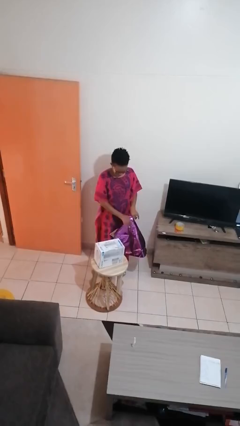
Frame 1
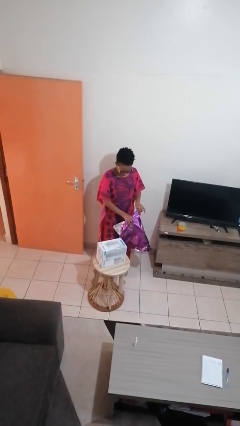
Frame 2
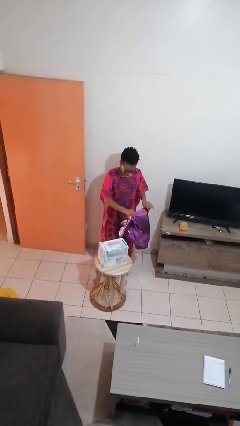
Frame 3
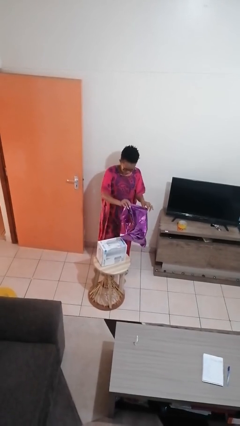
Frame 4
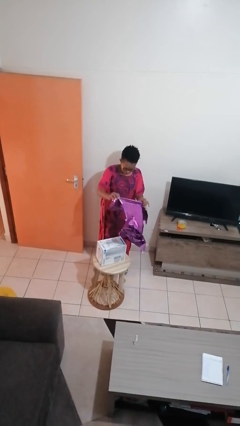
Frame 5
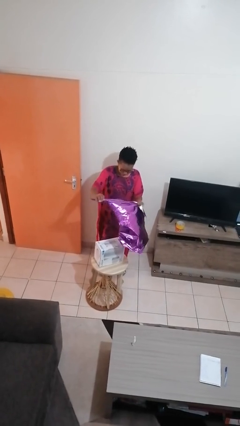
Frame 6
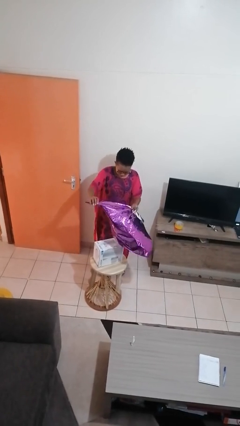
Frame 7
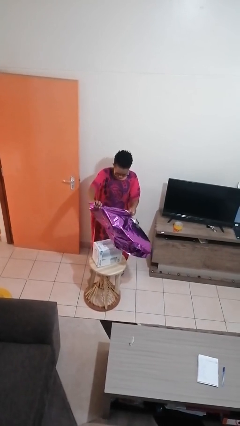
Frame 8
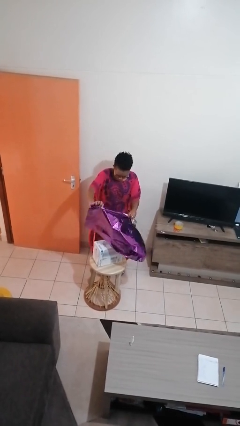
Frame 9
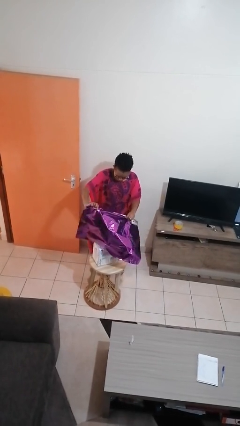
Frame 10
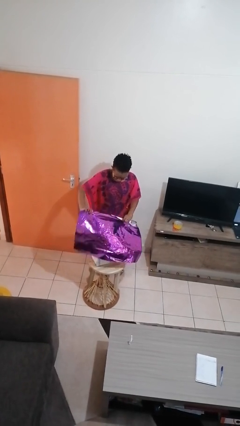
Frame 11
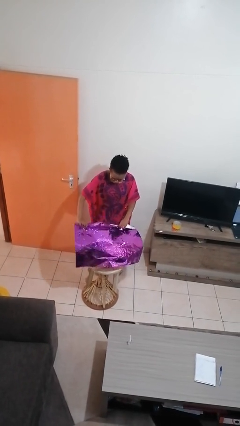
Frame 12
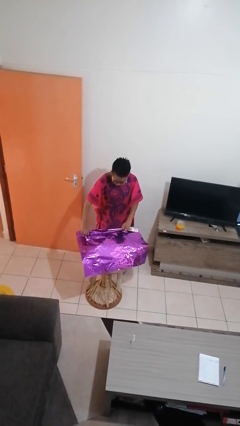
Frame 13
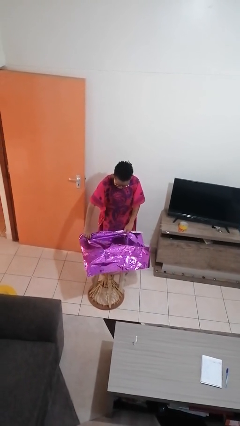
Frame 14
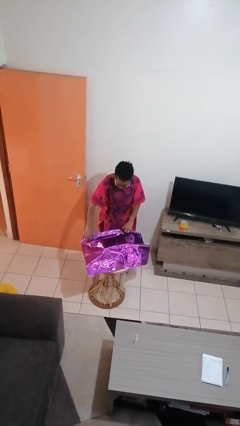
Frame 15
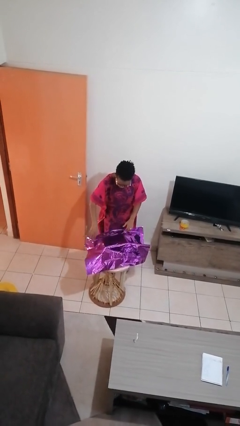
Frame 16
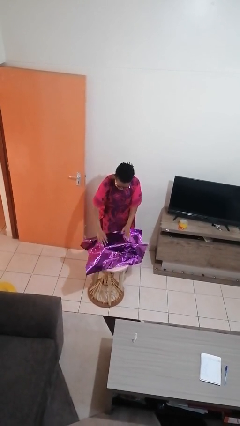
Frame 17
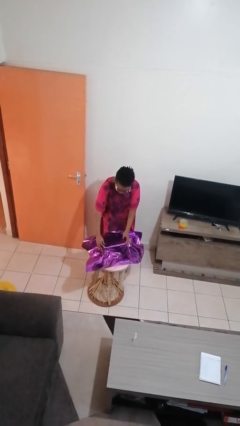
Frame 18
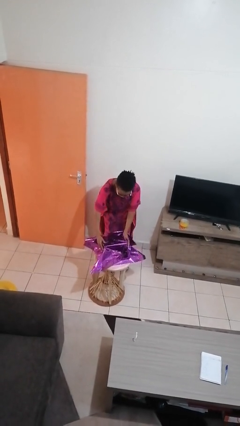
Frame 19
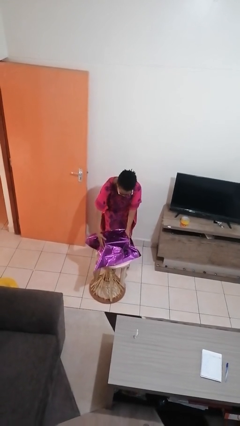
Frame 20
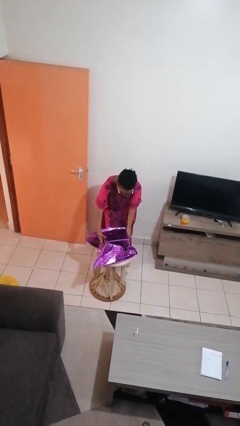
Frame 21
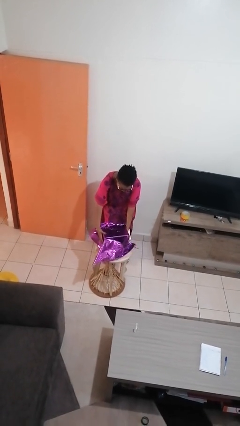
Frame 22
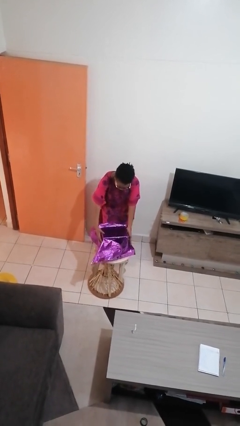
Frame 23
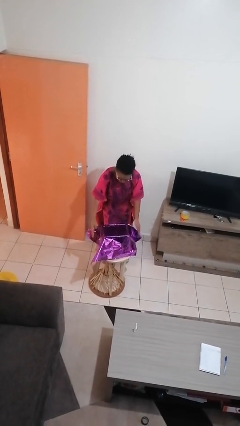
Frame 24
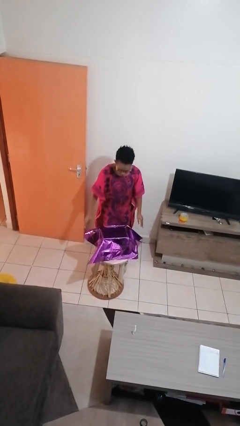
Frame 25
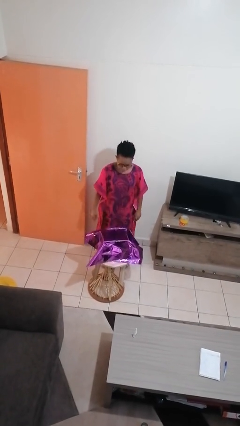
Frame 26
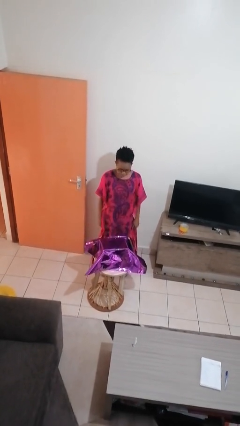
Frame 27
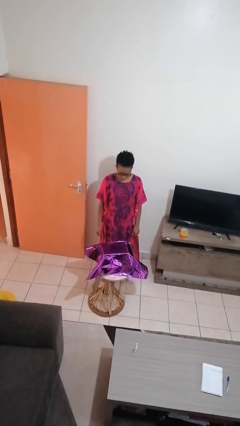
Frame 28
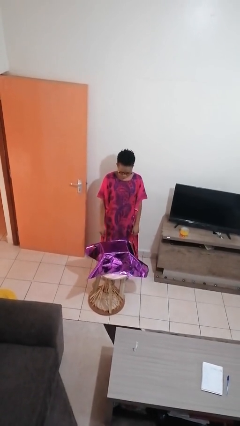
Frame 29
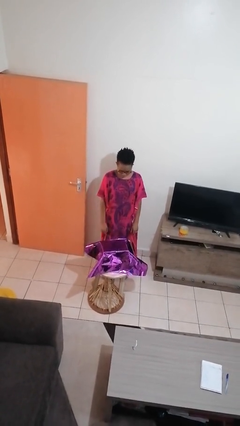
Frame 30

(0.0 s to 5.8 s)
person wraps box

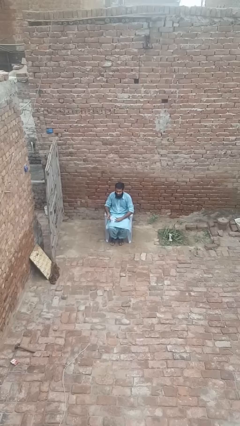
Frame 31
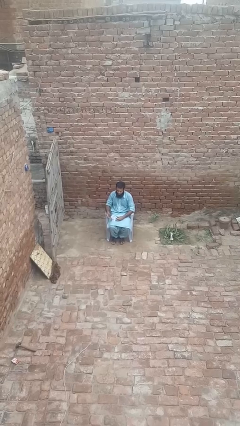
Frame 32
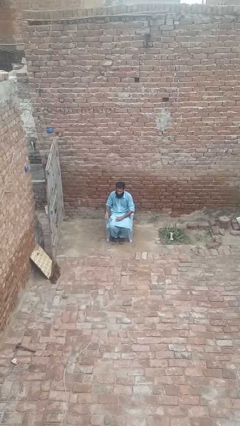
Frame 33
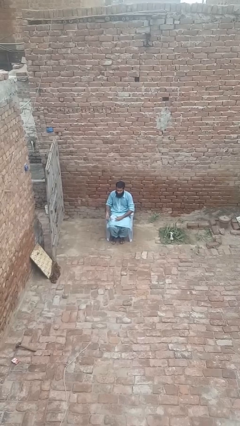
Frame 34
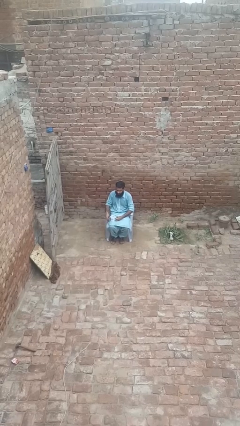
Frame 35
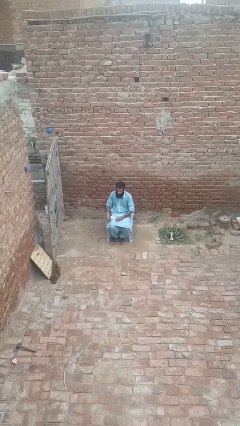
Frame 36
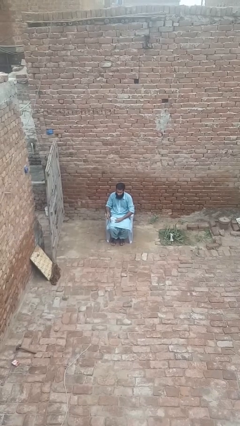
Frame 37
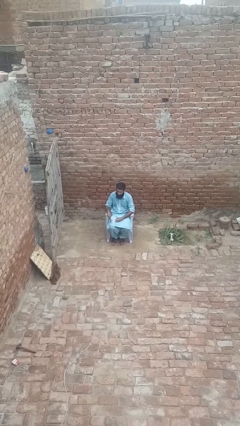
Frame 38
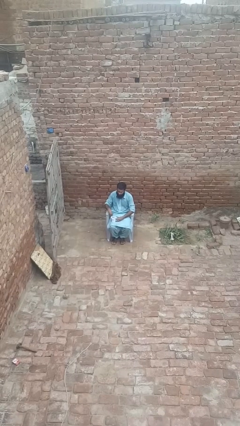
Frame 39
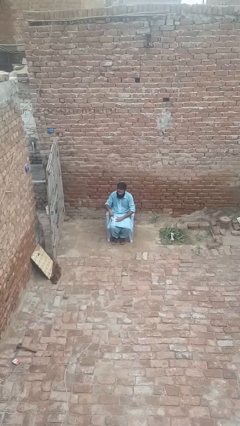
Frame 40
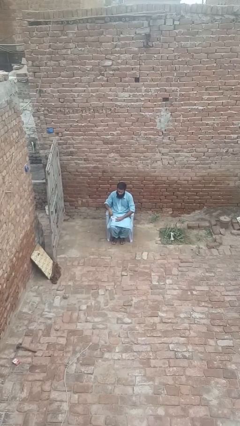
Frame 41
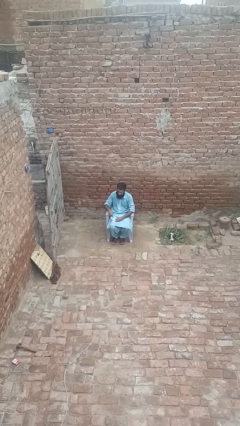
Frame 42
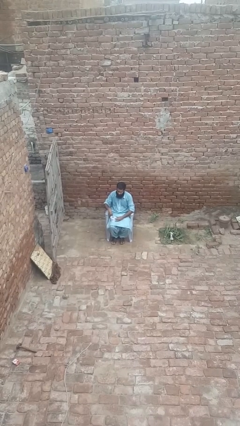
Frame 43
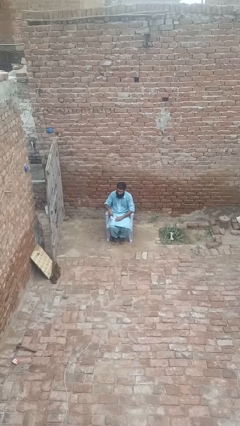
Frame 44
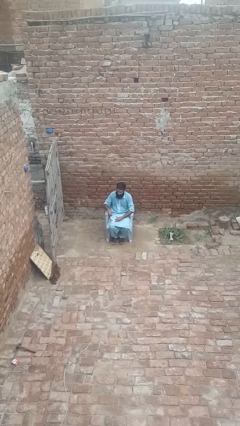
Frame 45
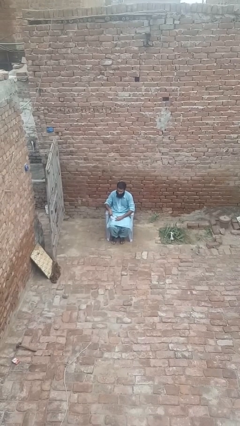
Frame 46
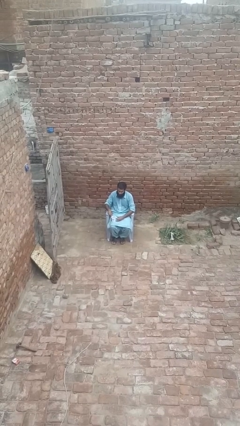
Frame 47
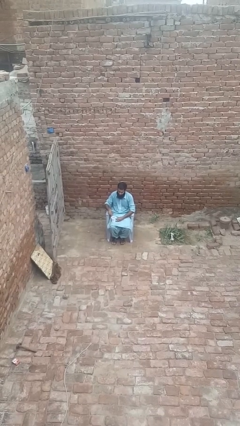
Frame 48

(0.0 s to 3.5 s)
person stirs mug

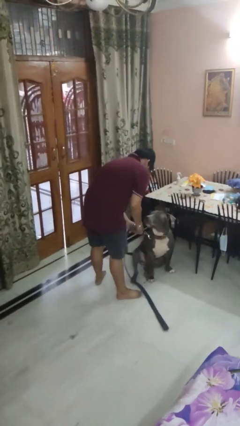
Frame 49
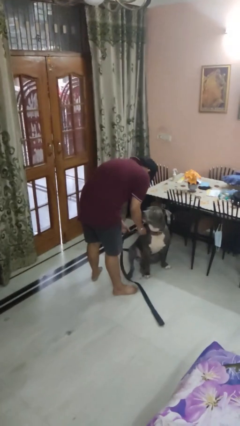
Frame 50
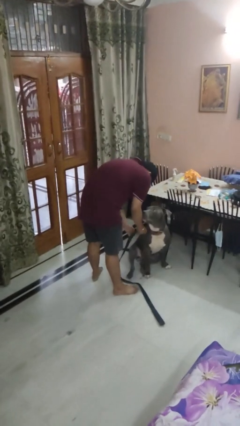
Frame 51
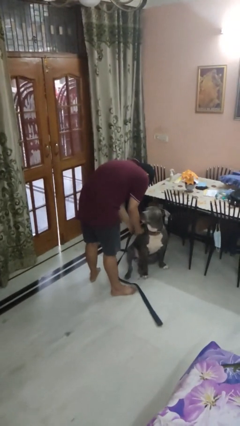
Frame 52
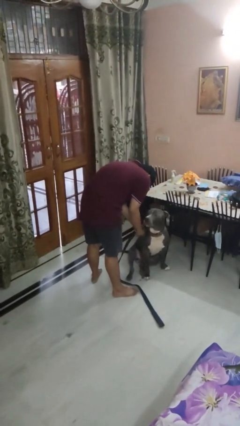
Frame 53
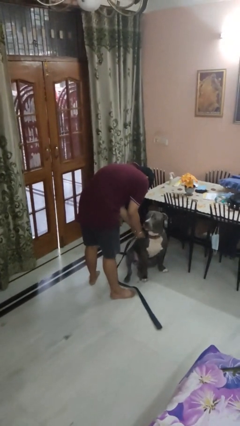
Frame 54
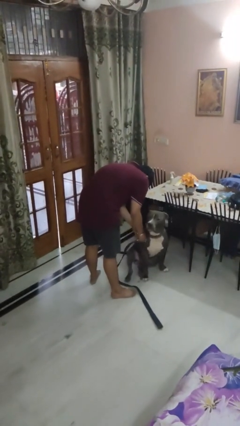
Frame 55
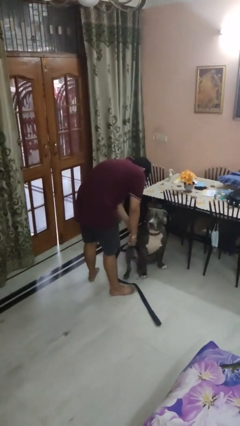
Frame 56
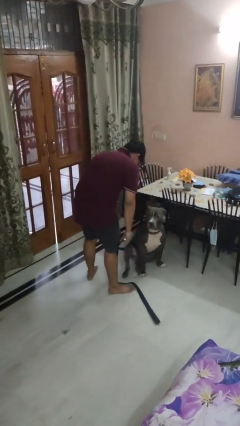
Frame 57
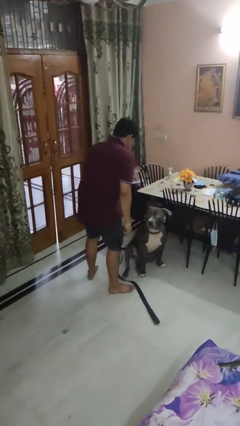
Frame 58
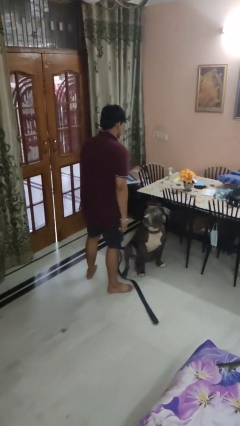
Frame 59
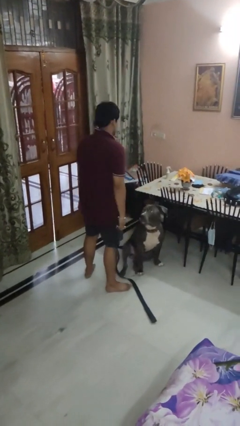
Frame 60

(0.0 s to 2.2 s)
person unattaches leash from dog

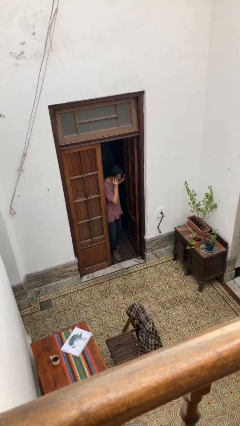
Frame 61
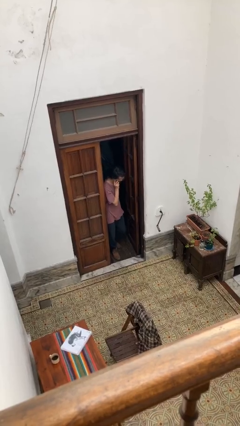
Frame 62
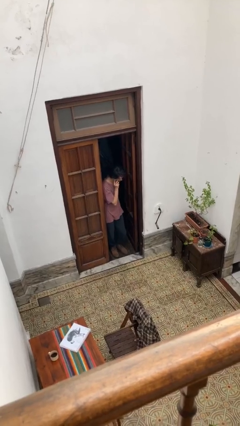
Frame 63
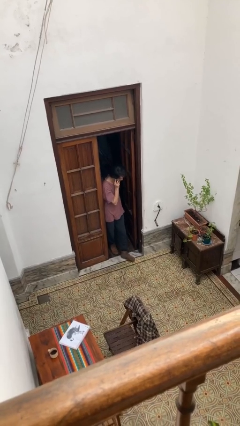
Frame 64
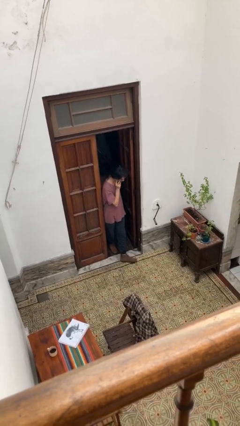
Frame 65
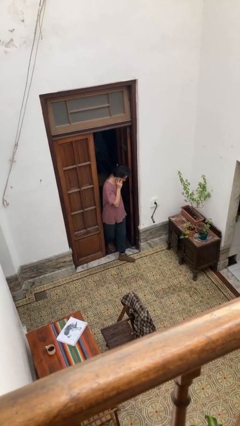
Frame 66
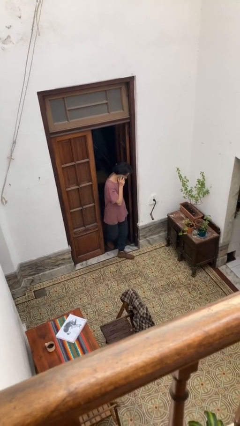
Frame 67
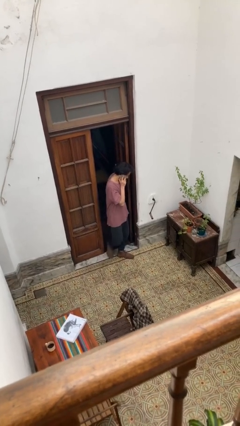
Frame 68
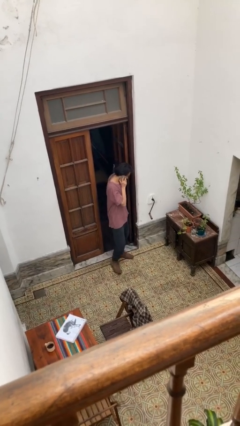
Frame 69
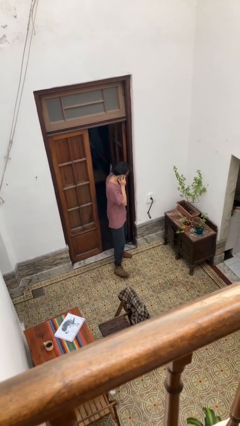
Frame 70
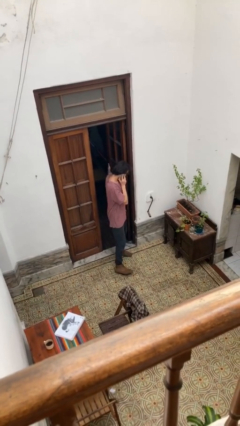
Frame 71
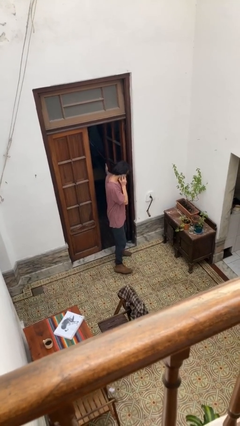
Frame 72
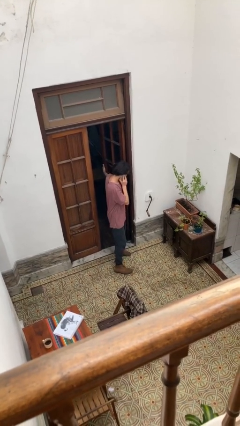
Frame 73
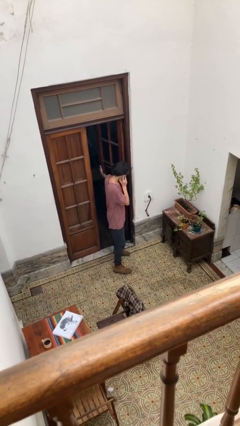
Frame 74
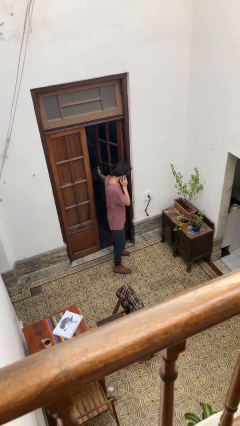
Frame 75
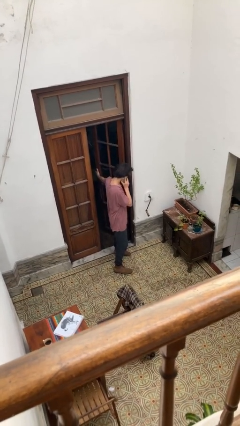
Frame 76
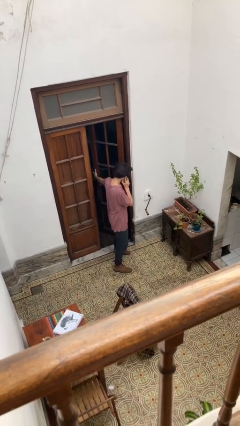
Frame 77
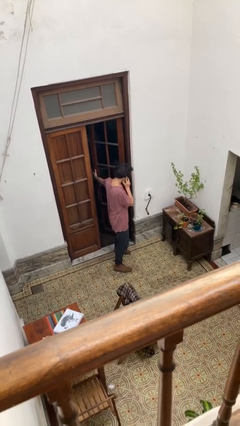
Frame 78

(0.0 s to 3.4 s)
person enters scene through structure

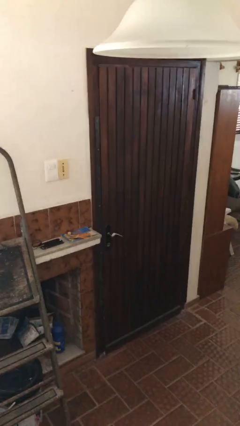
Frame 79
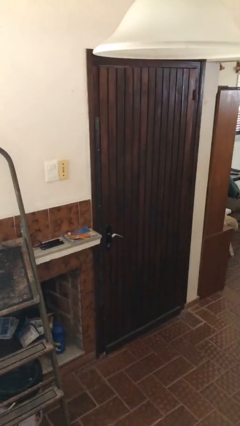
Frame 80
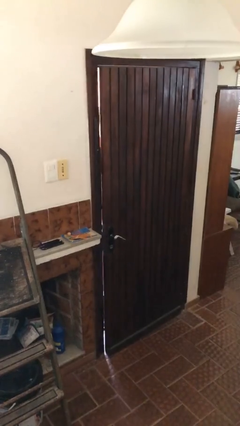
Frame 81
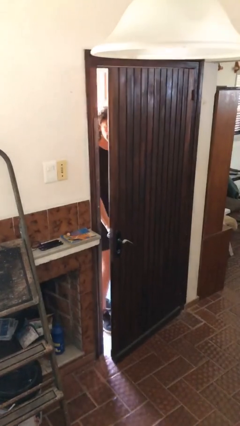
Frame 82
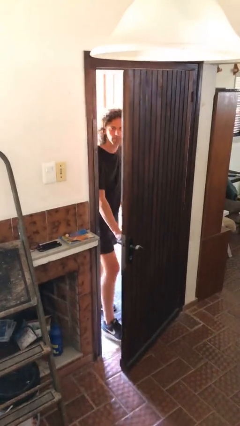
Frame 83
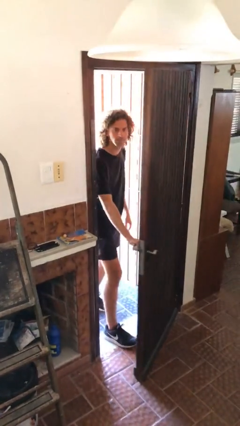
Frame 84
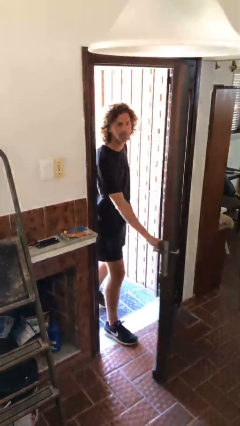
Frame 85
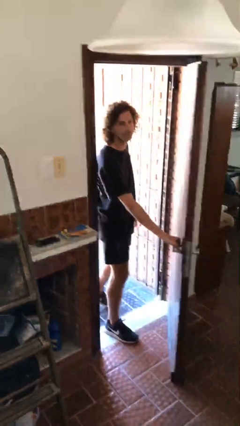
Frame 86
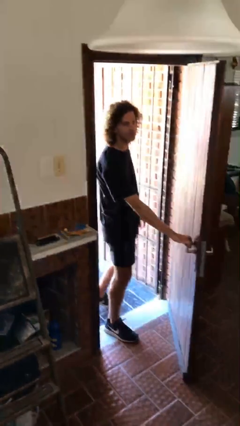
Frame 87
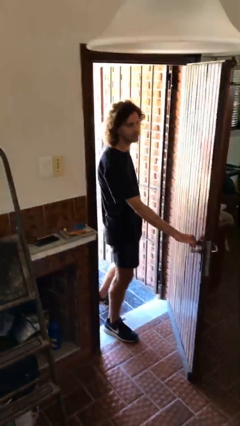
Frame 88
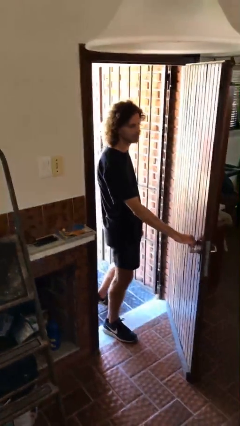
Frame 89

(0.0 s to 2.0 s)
person opens facility door

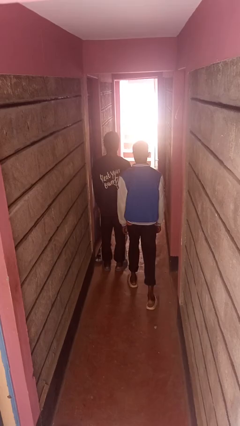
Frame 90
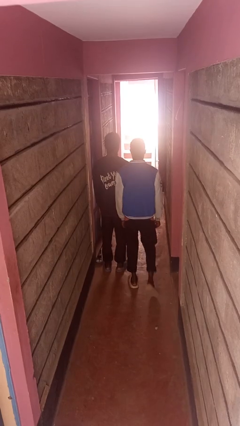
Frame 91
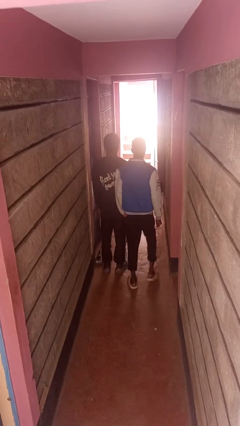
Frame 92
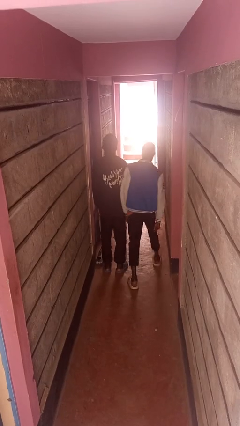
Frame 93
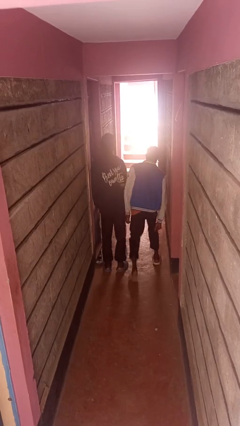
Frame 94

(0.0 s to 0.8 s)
person bumps into person
